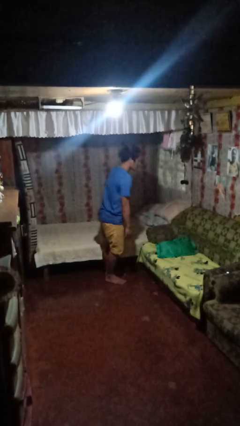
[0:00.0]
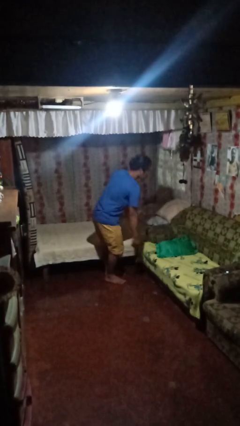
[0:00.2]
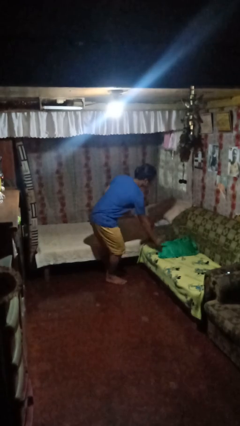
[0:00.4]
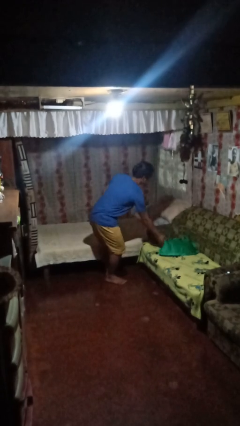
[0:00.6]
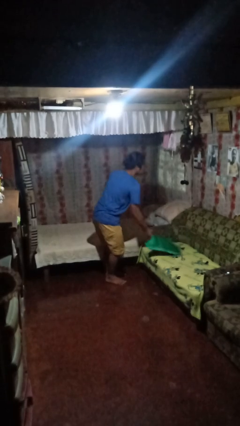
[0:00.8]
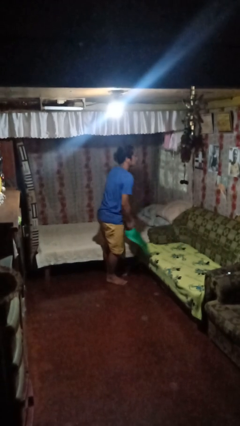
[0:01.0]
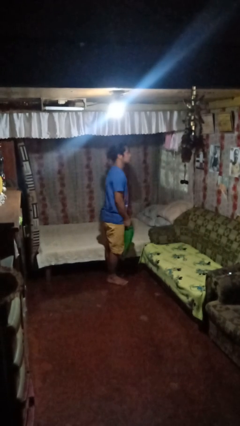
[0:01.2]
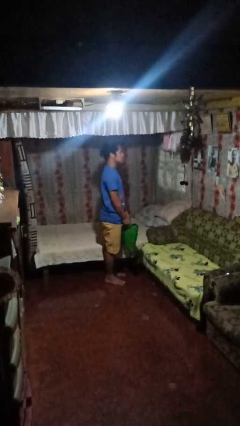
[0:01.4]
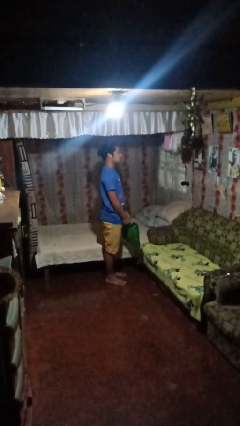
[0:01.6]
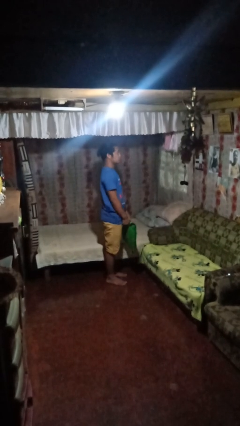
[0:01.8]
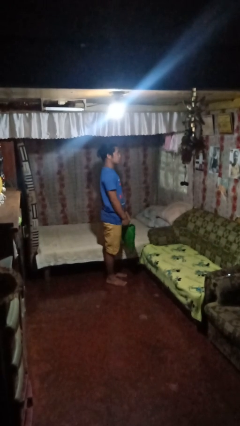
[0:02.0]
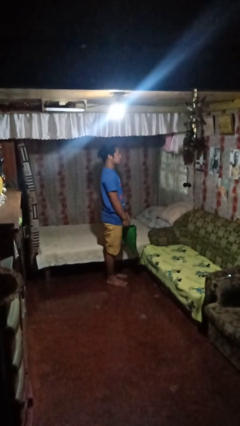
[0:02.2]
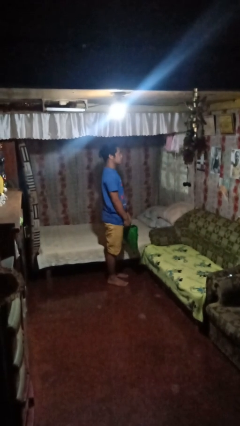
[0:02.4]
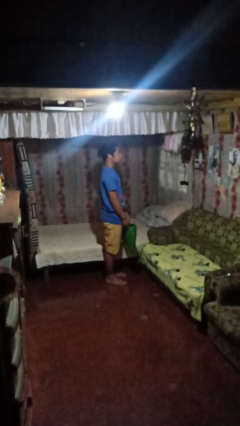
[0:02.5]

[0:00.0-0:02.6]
person picks up object from couch

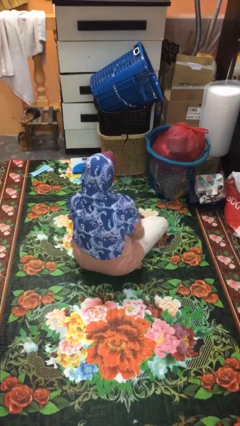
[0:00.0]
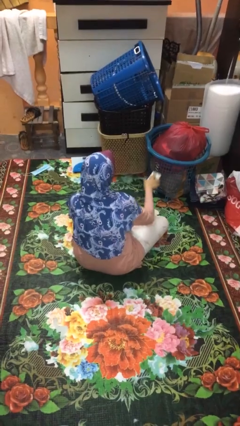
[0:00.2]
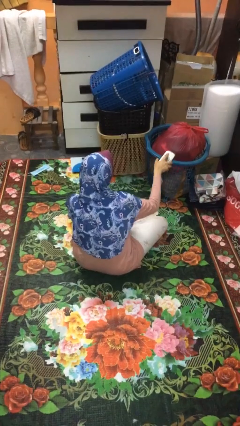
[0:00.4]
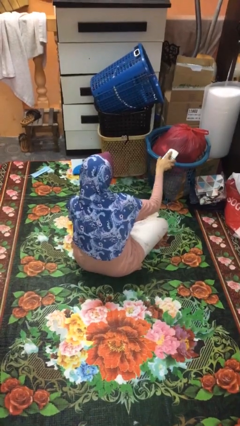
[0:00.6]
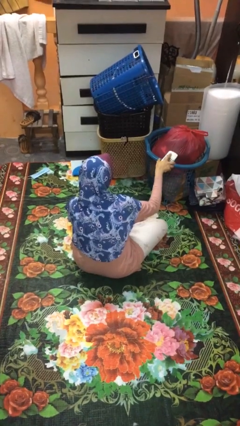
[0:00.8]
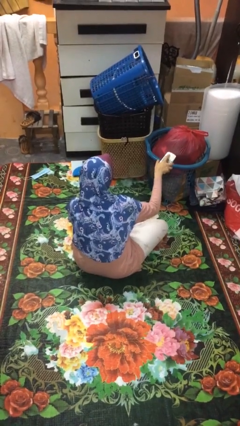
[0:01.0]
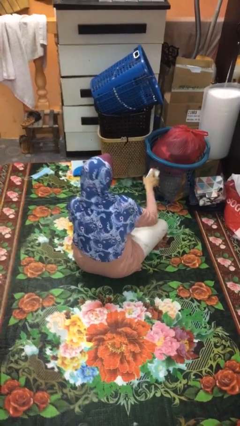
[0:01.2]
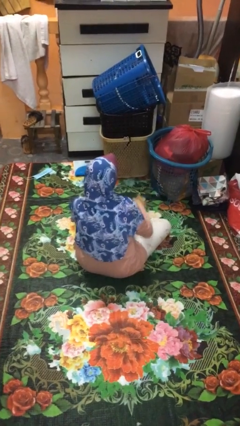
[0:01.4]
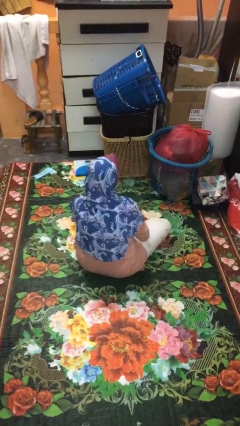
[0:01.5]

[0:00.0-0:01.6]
person uses television remote

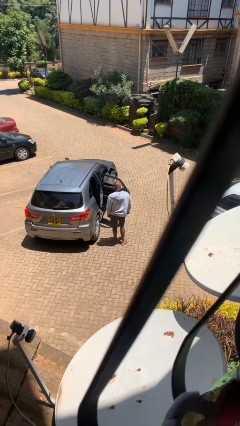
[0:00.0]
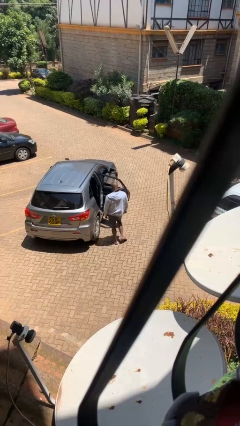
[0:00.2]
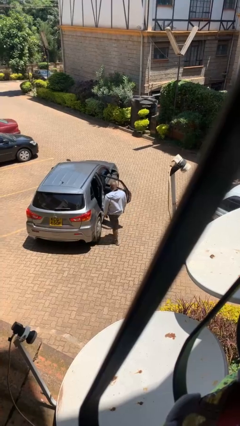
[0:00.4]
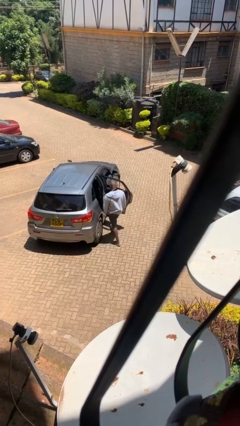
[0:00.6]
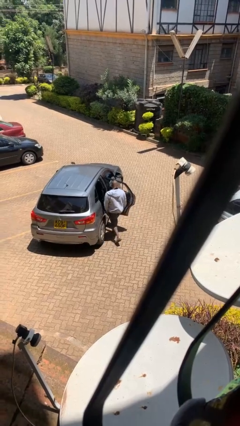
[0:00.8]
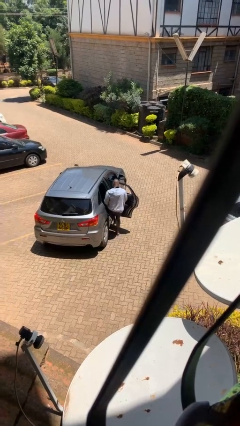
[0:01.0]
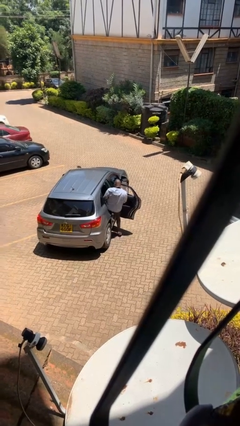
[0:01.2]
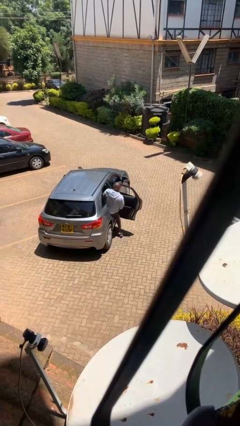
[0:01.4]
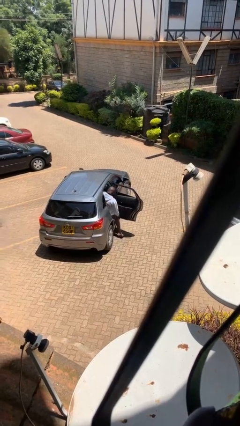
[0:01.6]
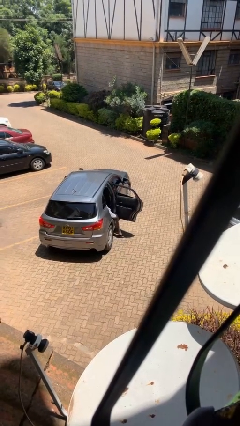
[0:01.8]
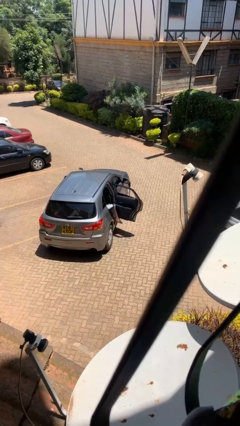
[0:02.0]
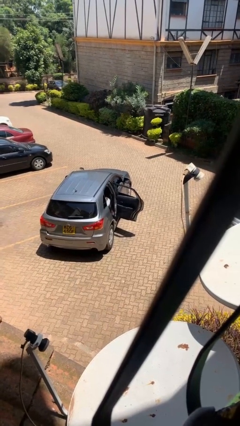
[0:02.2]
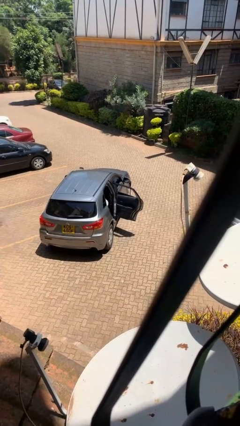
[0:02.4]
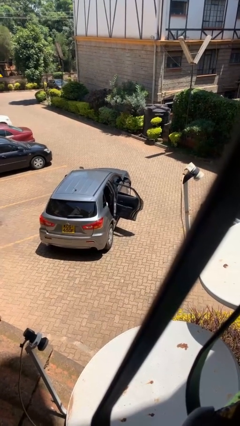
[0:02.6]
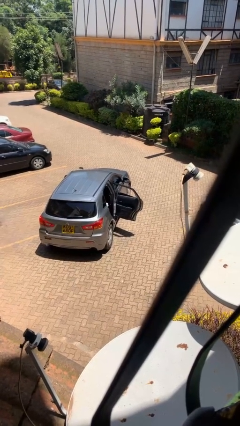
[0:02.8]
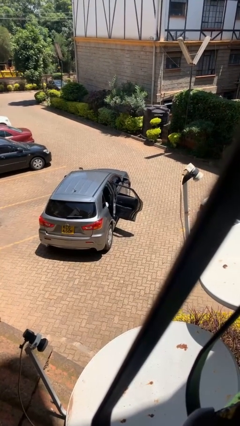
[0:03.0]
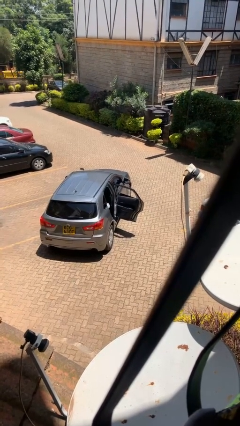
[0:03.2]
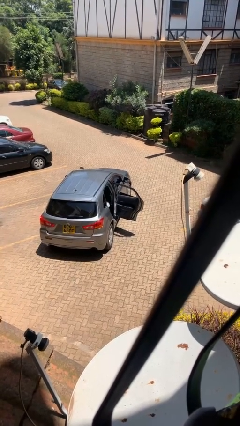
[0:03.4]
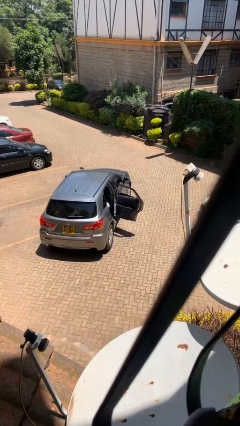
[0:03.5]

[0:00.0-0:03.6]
person enters car

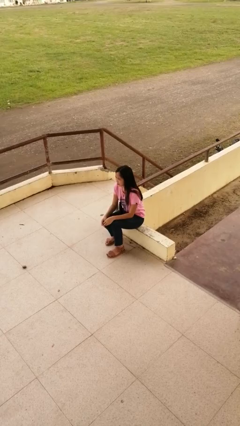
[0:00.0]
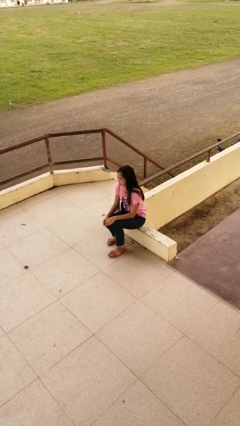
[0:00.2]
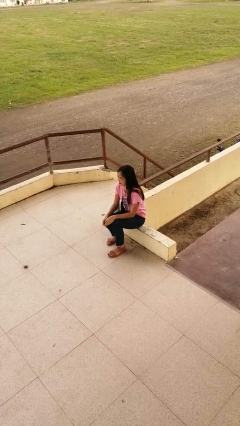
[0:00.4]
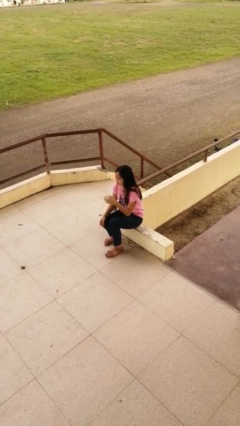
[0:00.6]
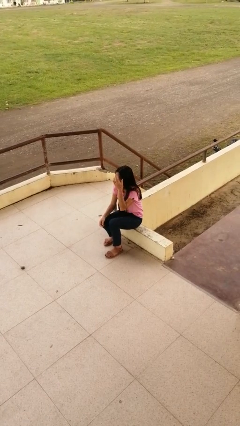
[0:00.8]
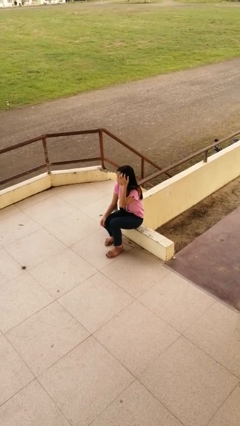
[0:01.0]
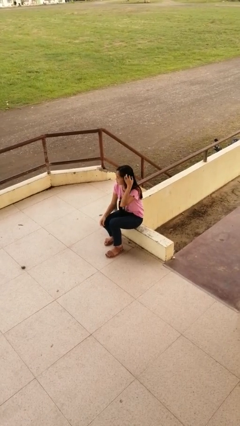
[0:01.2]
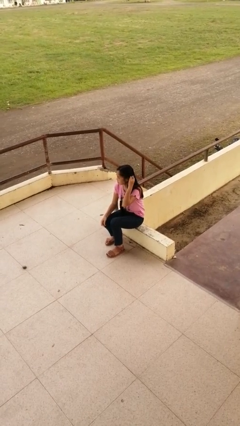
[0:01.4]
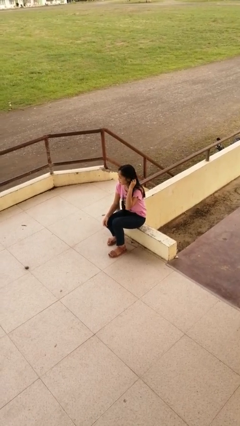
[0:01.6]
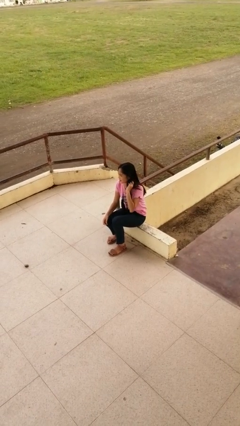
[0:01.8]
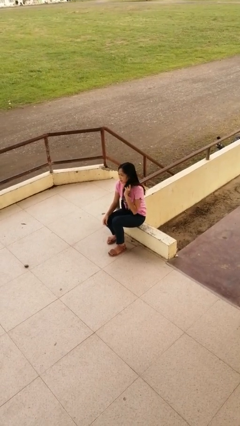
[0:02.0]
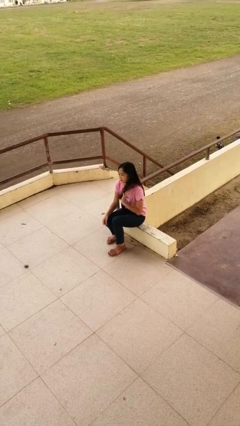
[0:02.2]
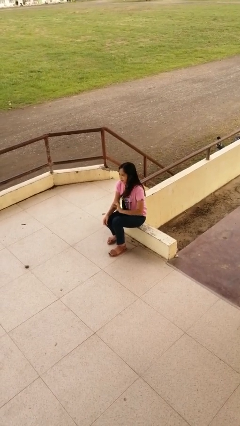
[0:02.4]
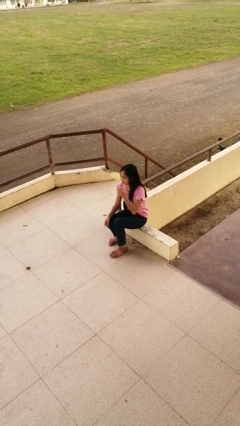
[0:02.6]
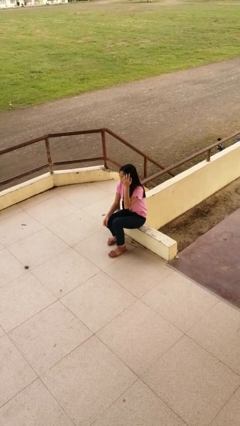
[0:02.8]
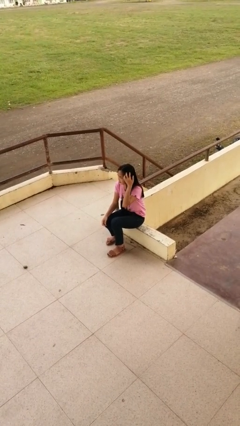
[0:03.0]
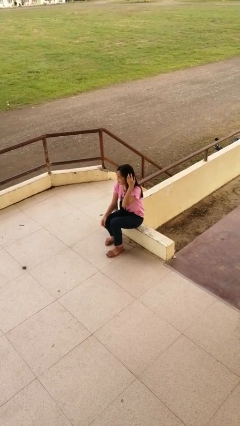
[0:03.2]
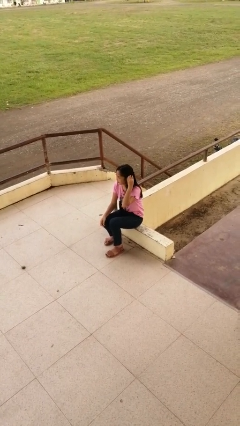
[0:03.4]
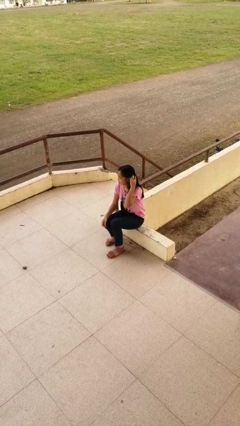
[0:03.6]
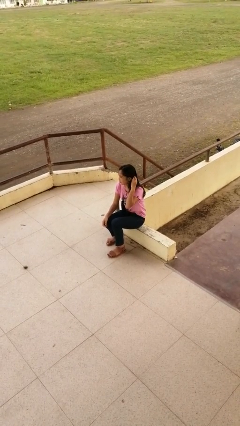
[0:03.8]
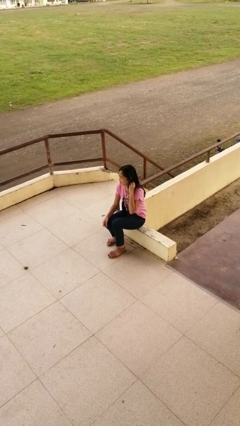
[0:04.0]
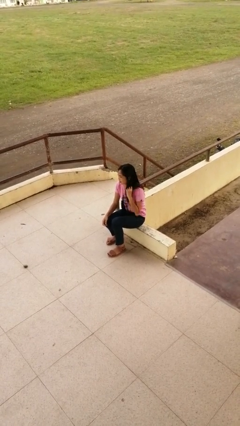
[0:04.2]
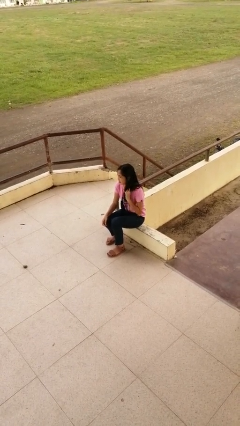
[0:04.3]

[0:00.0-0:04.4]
person strokes hair

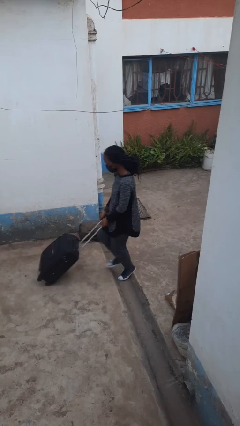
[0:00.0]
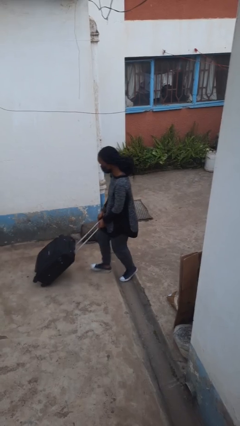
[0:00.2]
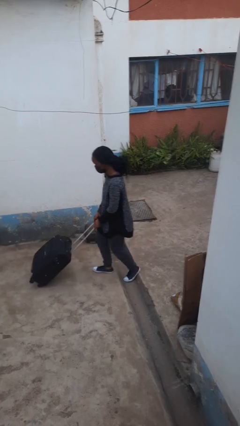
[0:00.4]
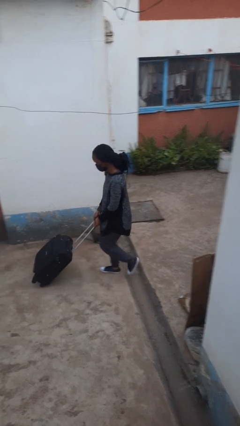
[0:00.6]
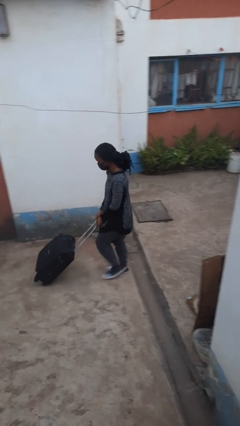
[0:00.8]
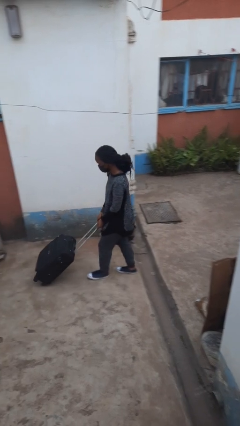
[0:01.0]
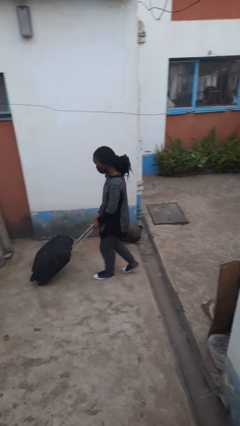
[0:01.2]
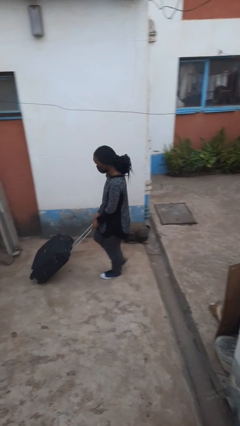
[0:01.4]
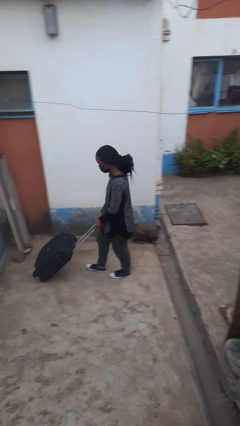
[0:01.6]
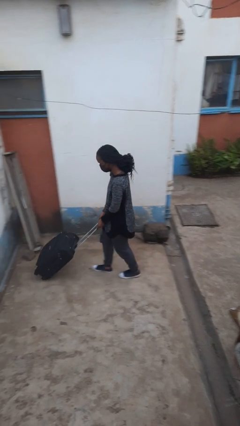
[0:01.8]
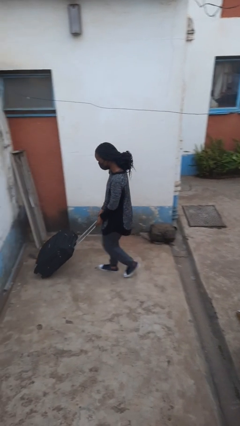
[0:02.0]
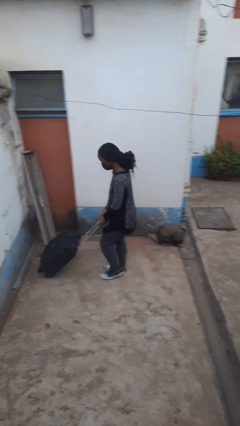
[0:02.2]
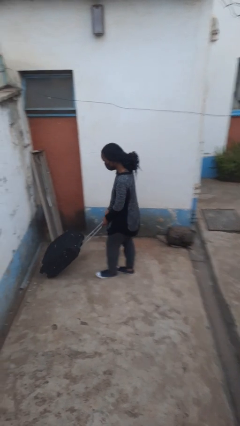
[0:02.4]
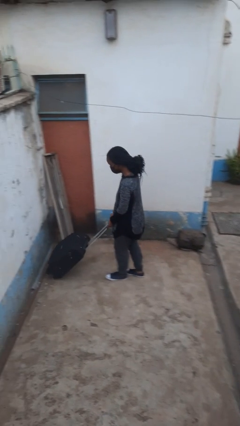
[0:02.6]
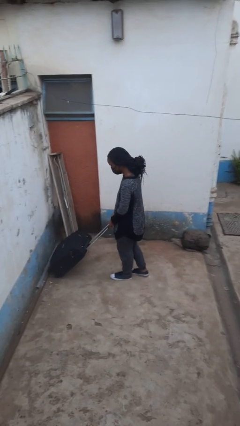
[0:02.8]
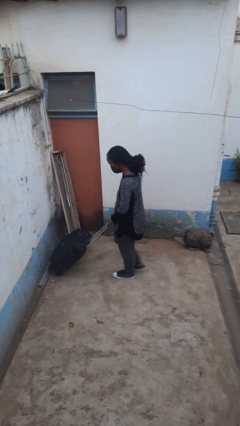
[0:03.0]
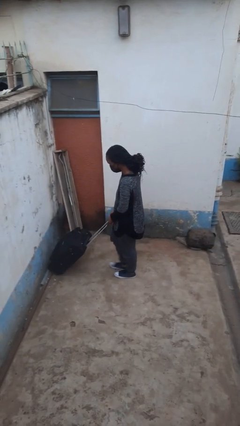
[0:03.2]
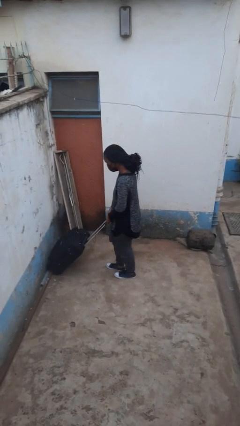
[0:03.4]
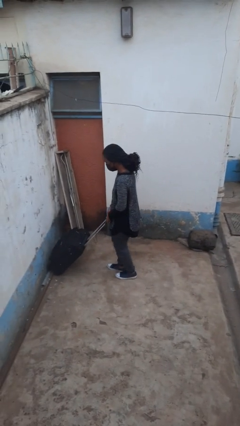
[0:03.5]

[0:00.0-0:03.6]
person pushes wheeled cart

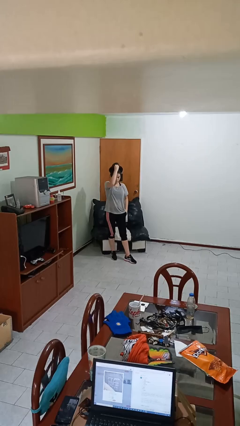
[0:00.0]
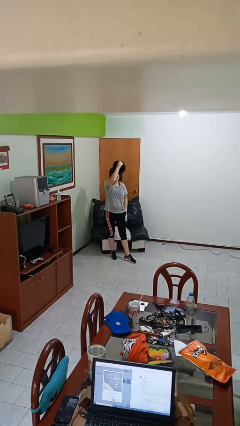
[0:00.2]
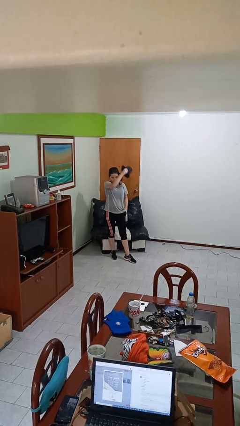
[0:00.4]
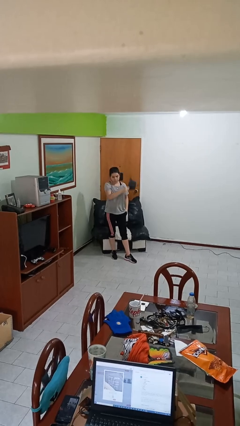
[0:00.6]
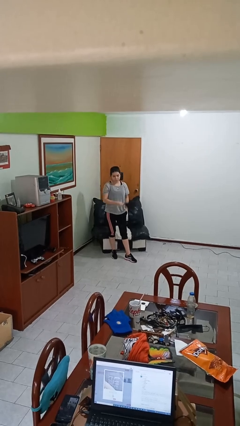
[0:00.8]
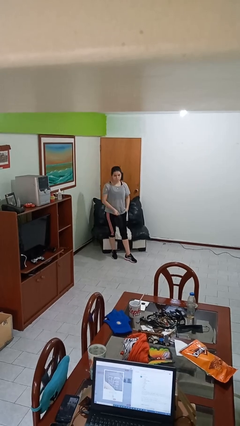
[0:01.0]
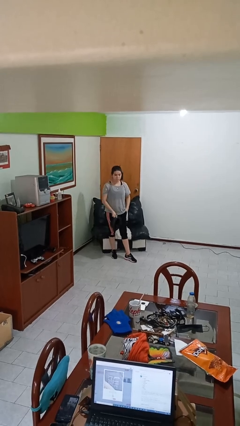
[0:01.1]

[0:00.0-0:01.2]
person takes off hat

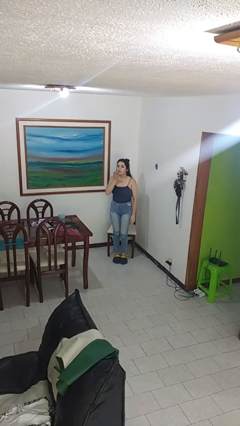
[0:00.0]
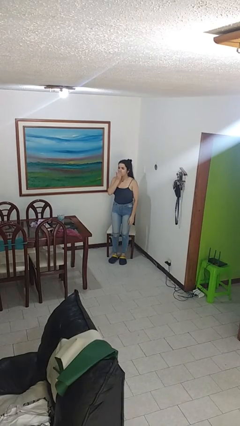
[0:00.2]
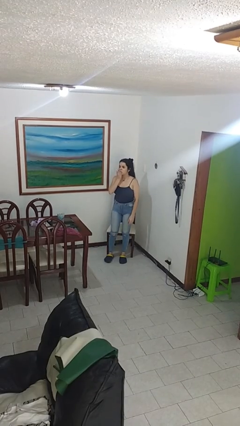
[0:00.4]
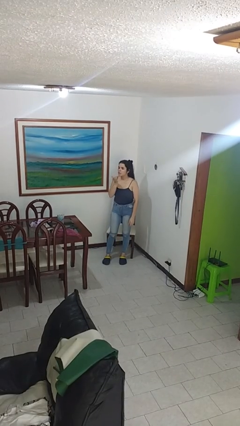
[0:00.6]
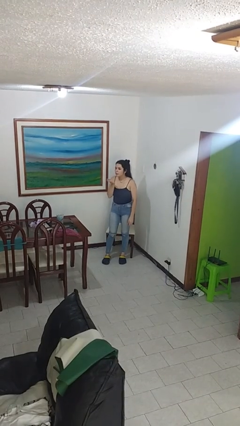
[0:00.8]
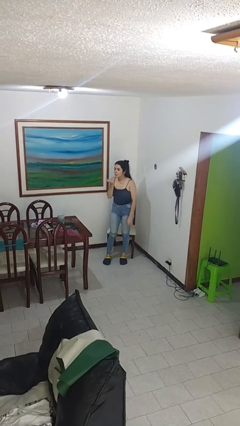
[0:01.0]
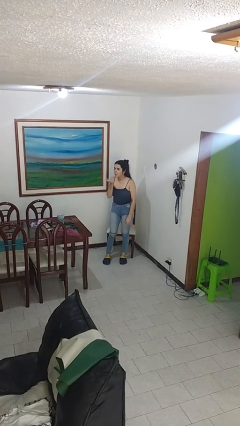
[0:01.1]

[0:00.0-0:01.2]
person gestures blow kiss
